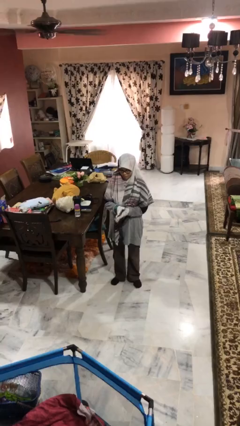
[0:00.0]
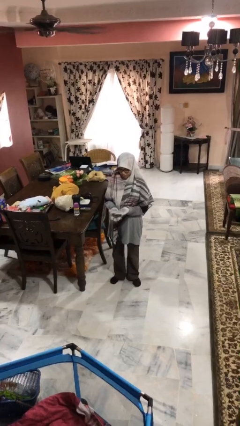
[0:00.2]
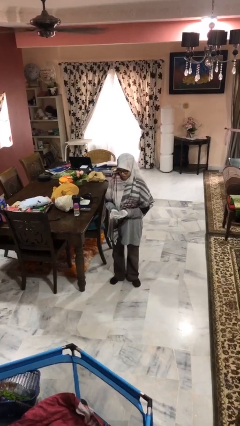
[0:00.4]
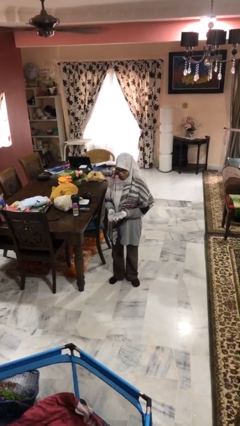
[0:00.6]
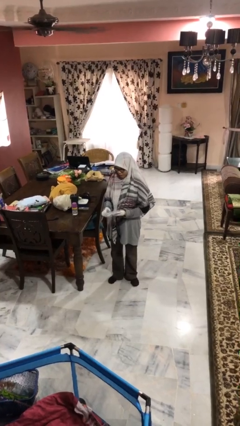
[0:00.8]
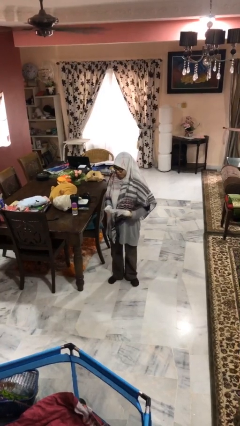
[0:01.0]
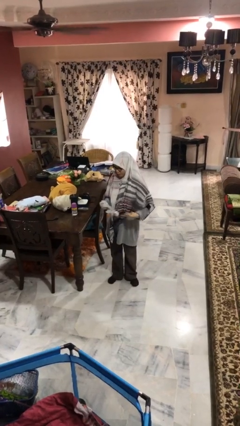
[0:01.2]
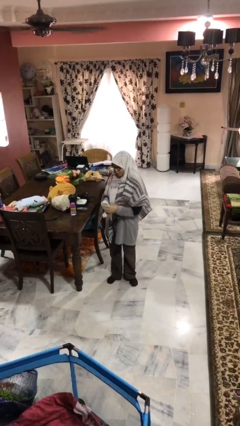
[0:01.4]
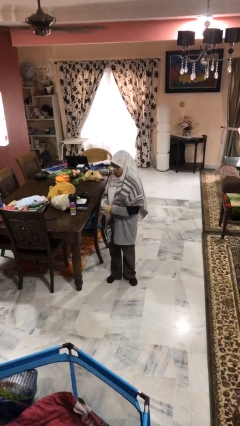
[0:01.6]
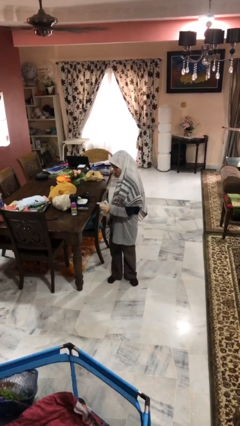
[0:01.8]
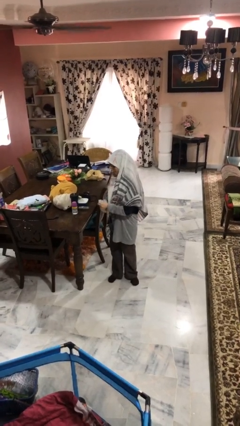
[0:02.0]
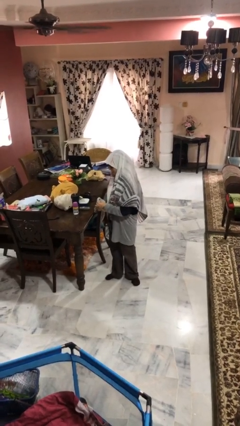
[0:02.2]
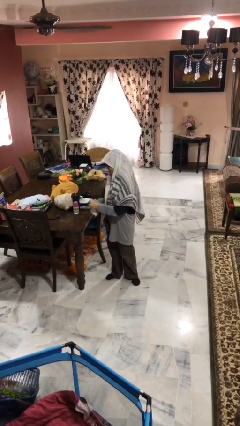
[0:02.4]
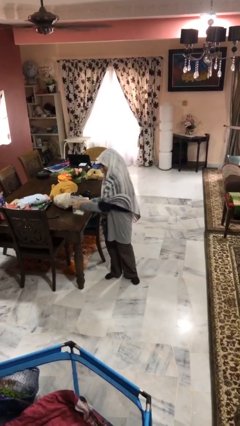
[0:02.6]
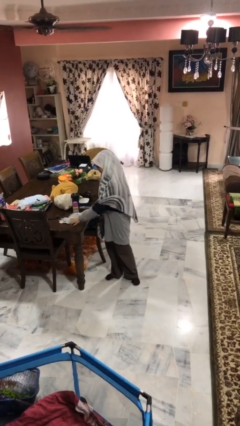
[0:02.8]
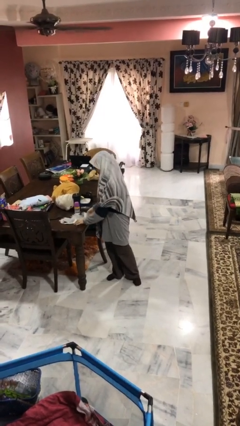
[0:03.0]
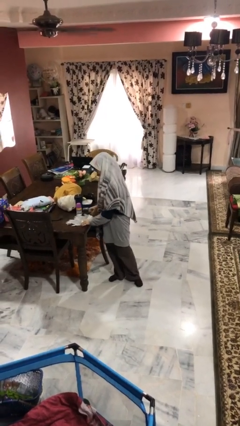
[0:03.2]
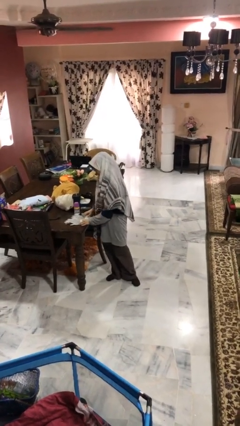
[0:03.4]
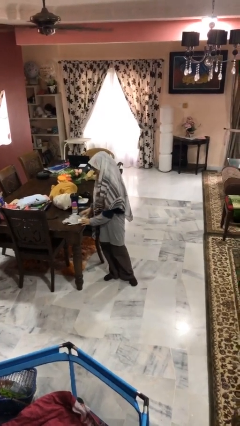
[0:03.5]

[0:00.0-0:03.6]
person takes off gloves

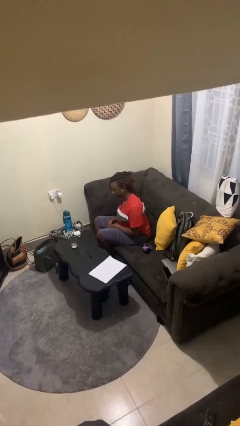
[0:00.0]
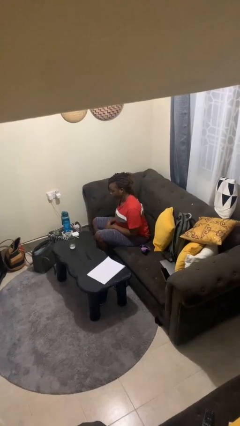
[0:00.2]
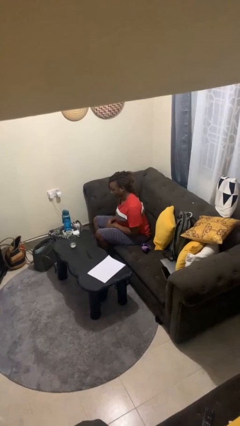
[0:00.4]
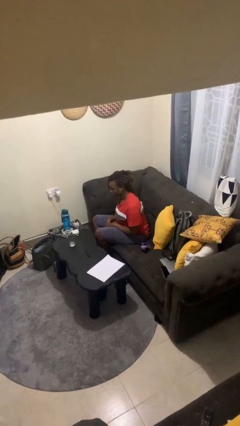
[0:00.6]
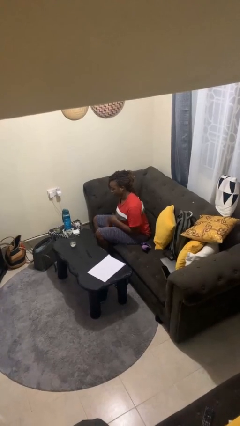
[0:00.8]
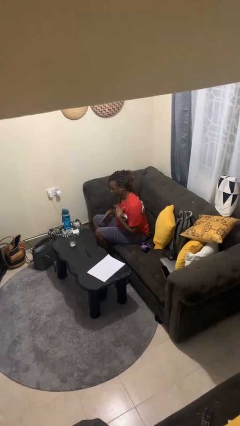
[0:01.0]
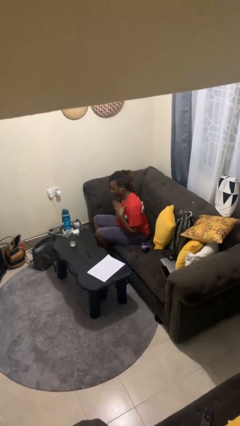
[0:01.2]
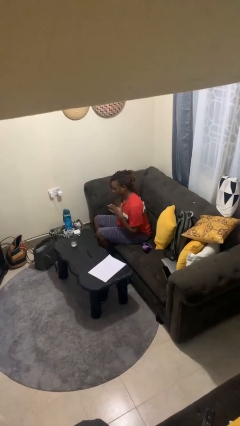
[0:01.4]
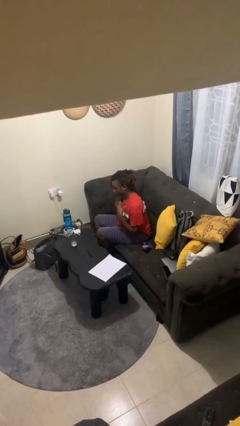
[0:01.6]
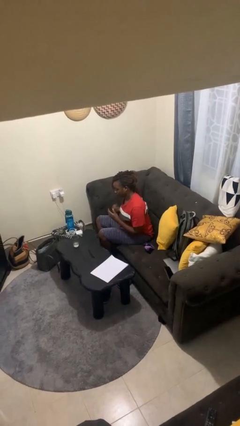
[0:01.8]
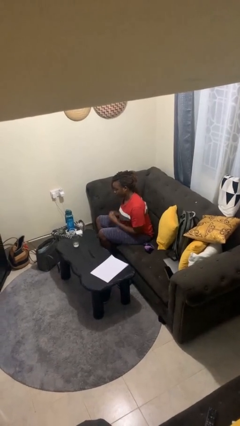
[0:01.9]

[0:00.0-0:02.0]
person drums on chest

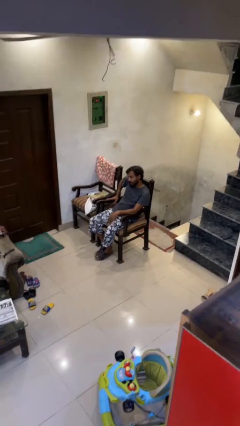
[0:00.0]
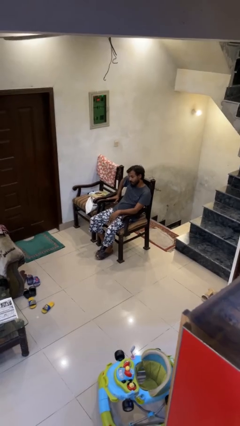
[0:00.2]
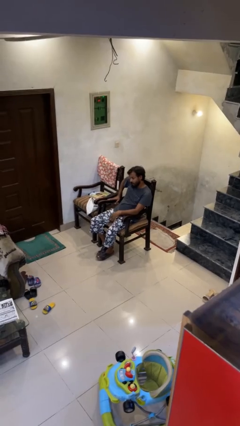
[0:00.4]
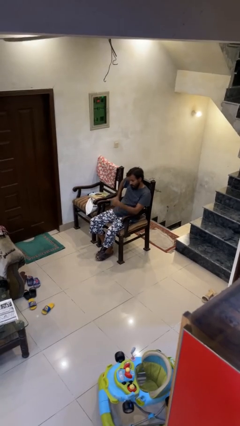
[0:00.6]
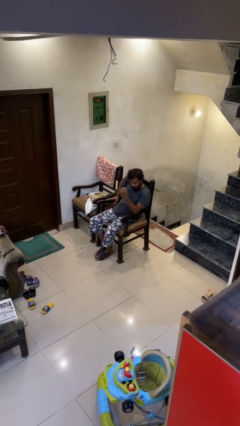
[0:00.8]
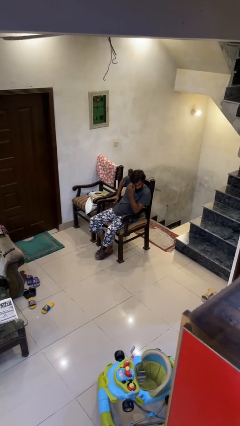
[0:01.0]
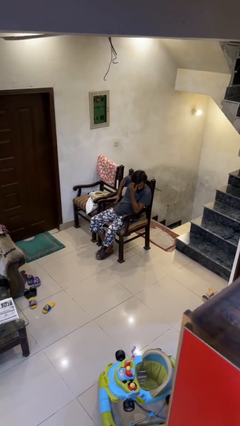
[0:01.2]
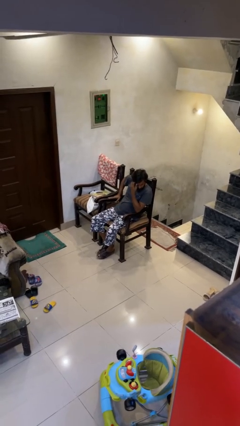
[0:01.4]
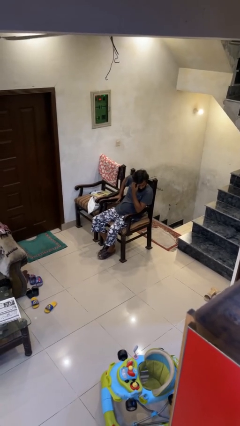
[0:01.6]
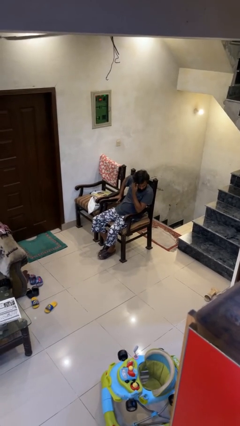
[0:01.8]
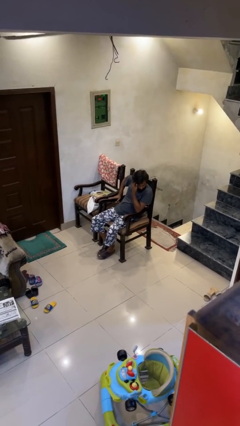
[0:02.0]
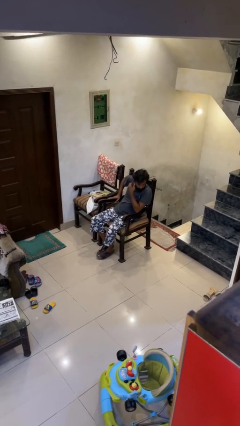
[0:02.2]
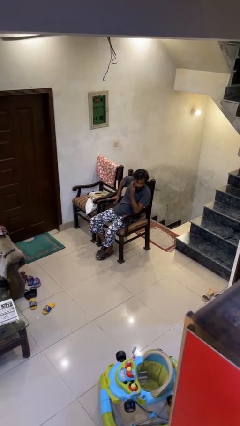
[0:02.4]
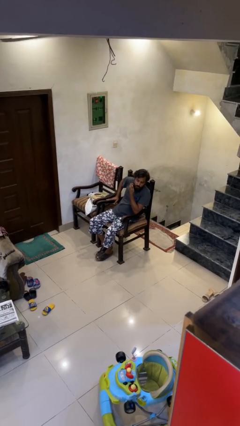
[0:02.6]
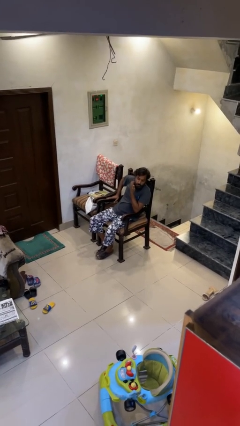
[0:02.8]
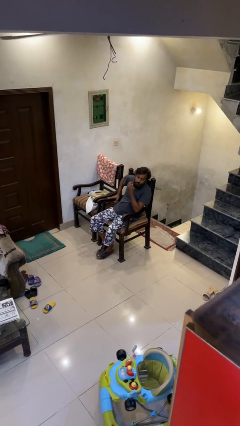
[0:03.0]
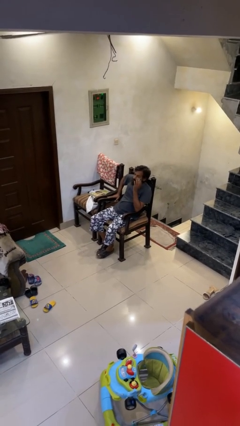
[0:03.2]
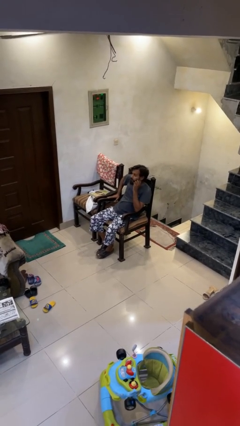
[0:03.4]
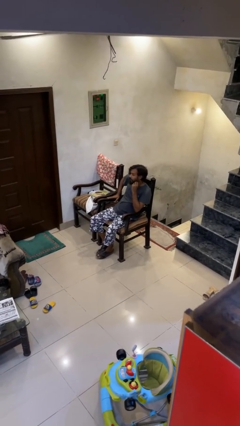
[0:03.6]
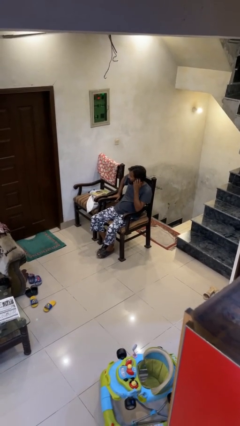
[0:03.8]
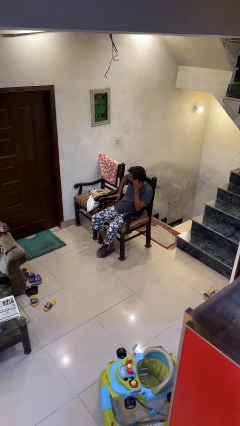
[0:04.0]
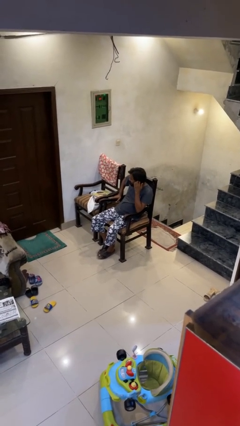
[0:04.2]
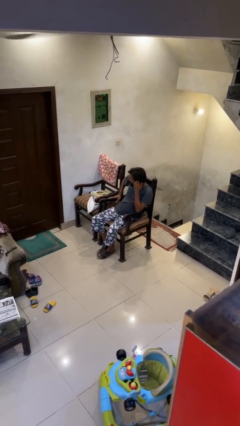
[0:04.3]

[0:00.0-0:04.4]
person scratches face

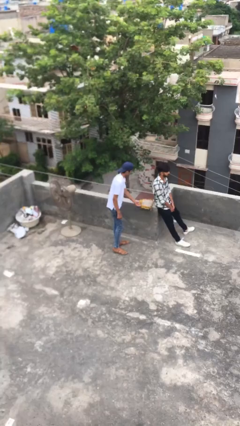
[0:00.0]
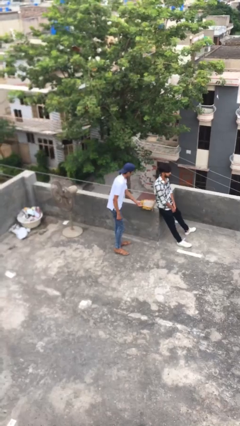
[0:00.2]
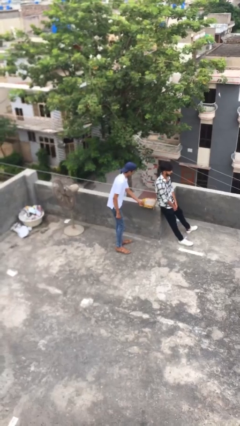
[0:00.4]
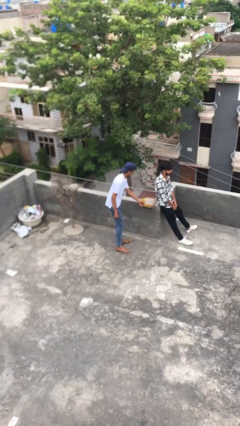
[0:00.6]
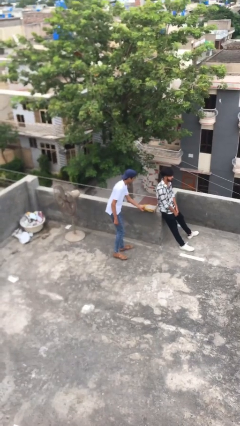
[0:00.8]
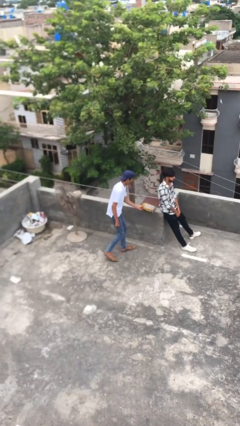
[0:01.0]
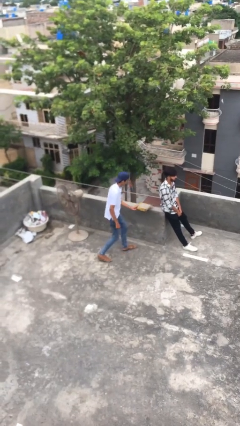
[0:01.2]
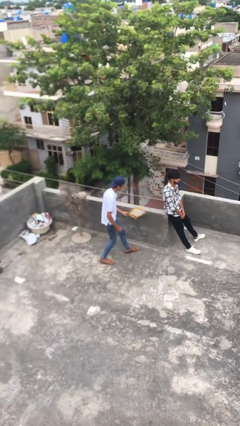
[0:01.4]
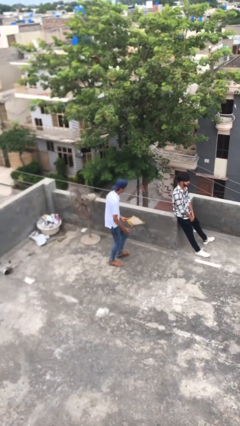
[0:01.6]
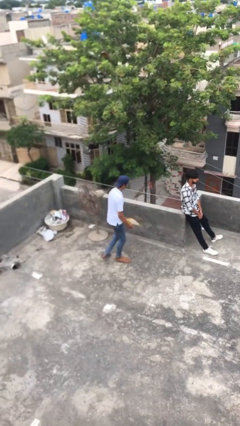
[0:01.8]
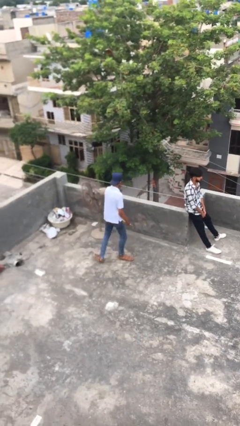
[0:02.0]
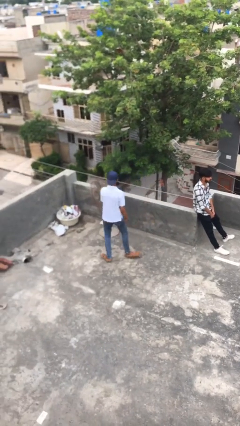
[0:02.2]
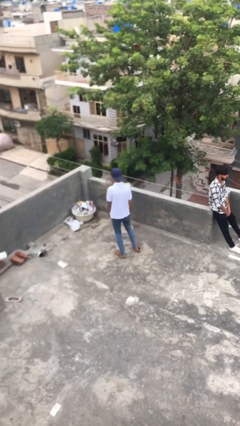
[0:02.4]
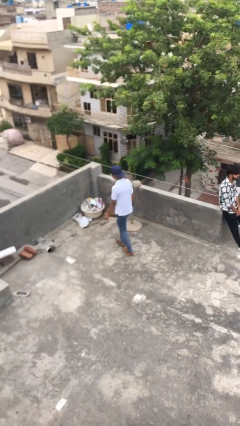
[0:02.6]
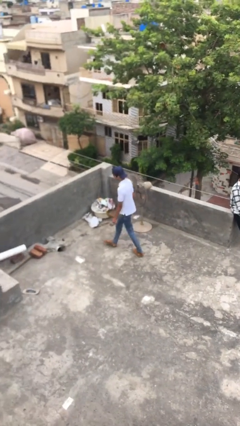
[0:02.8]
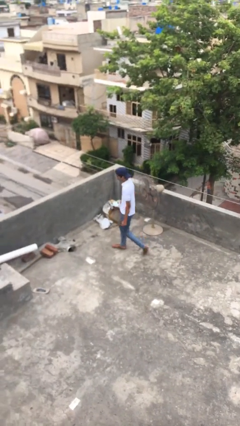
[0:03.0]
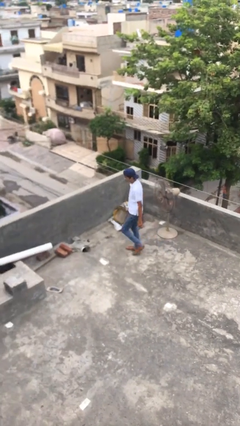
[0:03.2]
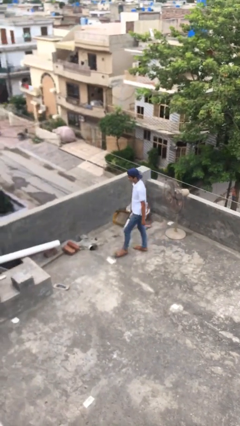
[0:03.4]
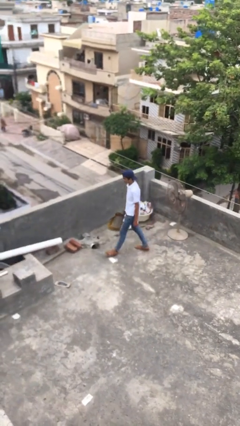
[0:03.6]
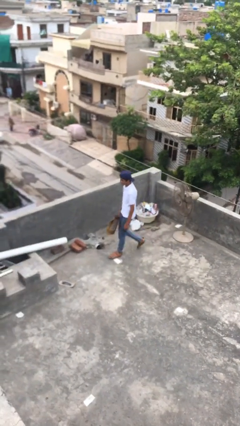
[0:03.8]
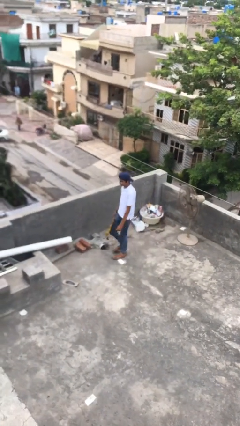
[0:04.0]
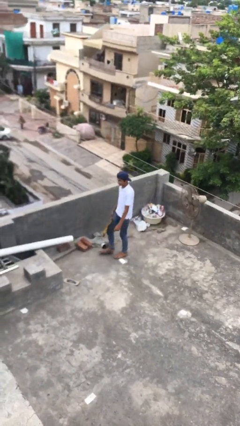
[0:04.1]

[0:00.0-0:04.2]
person steals object from person

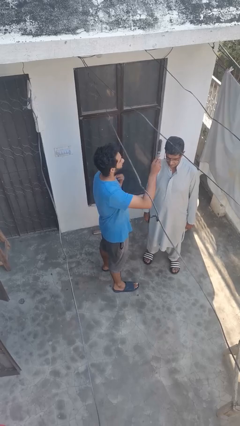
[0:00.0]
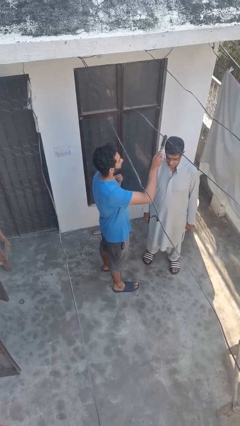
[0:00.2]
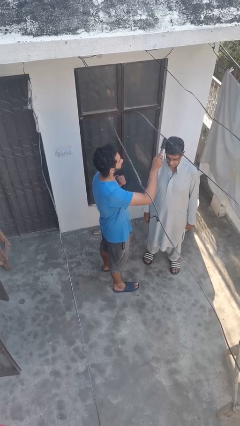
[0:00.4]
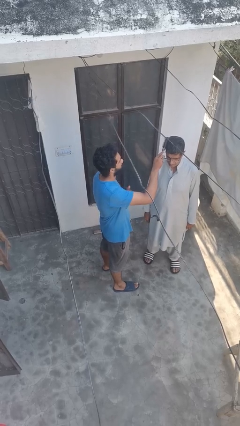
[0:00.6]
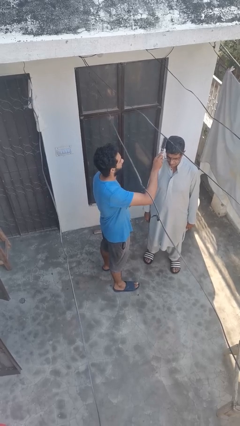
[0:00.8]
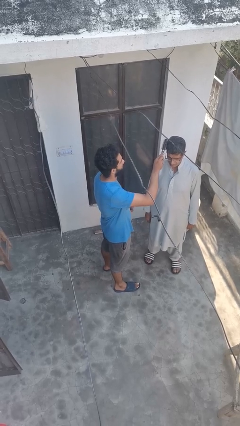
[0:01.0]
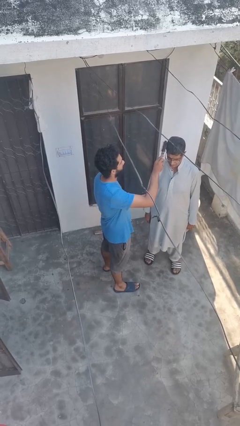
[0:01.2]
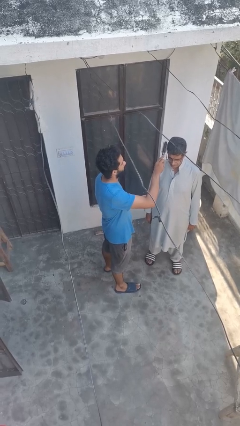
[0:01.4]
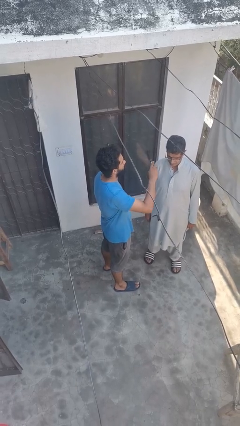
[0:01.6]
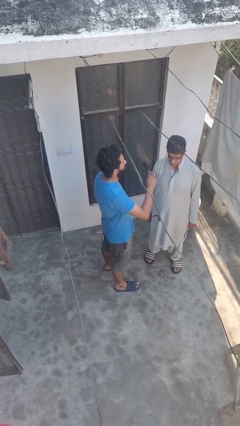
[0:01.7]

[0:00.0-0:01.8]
person brushes hair of person

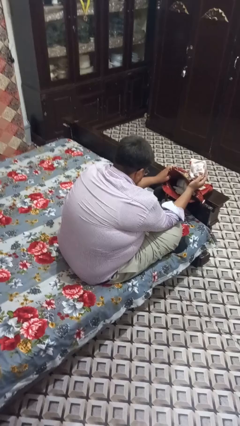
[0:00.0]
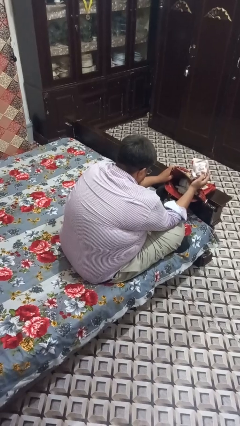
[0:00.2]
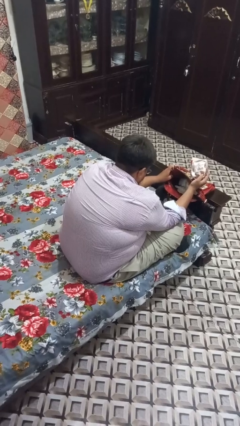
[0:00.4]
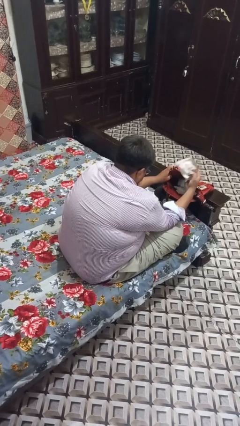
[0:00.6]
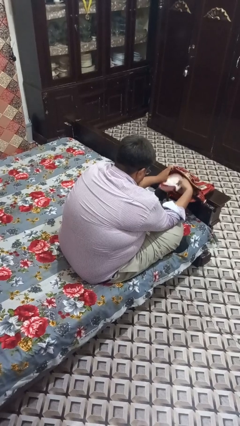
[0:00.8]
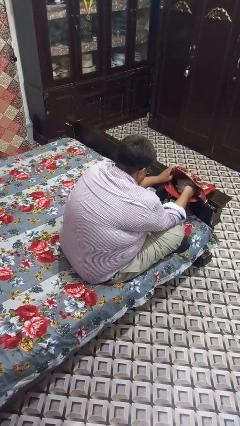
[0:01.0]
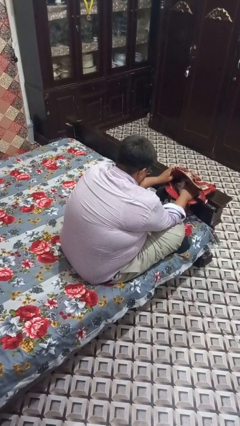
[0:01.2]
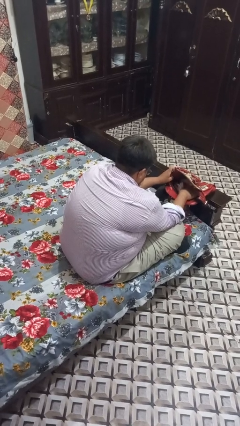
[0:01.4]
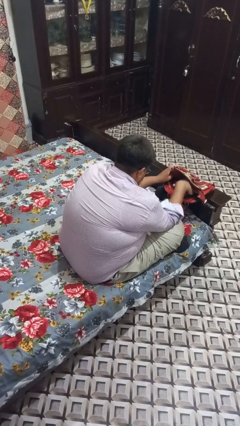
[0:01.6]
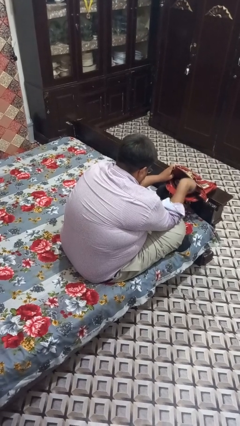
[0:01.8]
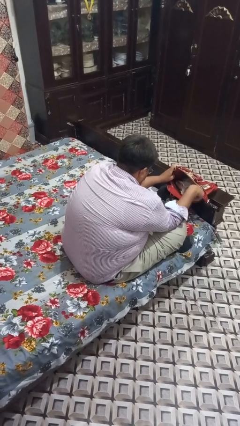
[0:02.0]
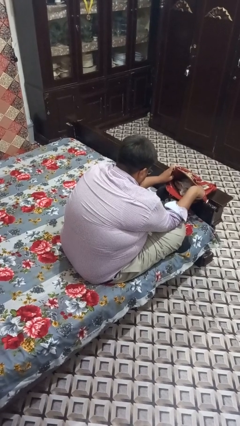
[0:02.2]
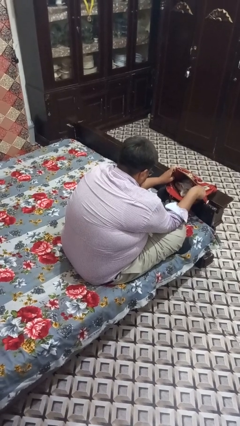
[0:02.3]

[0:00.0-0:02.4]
person puts object into purse
